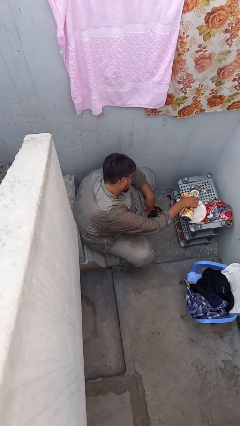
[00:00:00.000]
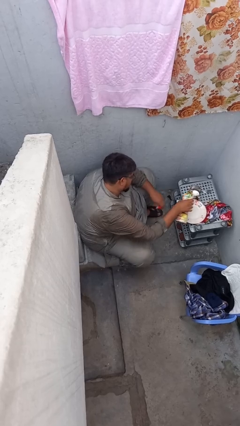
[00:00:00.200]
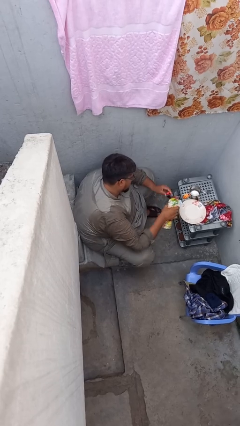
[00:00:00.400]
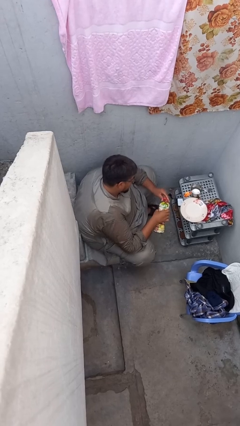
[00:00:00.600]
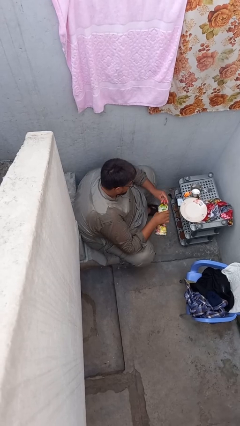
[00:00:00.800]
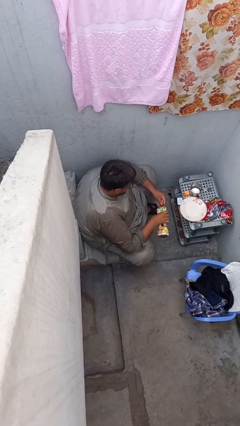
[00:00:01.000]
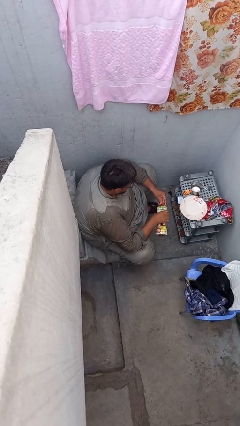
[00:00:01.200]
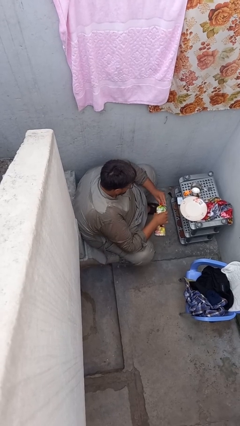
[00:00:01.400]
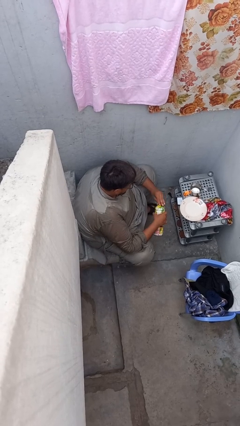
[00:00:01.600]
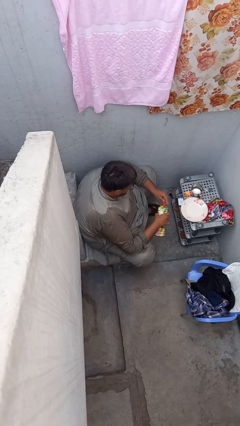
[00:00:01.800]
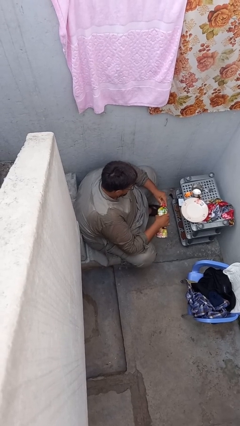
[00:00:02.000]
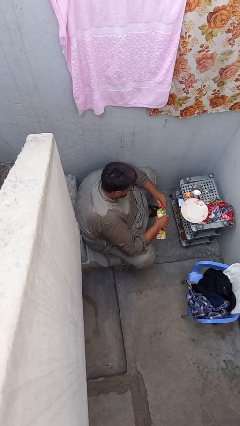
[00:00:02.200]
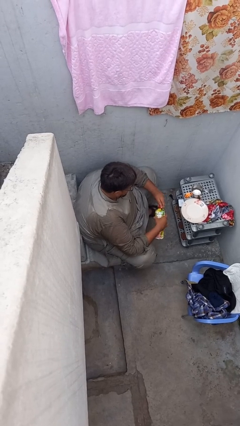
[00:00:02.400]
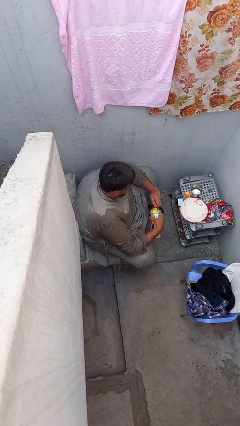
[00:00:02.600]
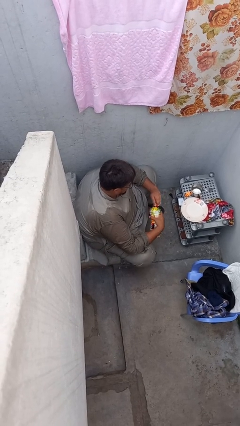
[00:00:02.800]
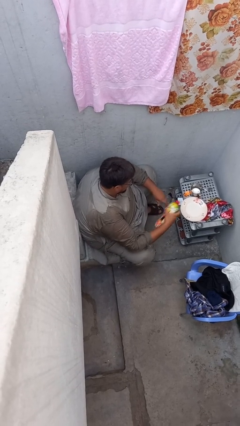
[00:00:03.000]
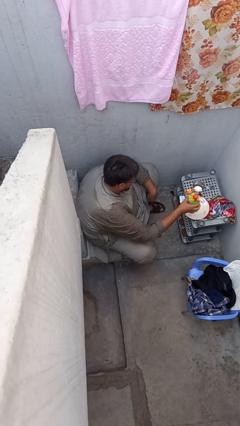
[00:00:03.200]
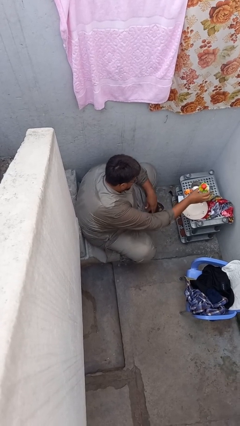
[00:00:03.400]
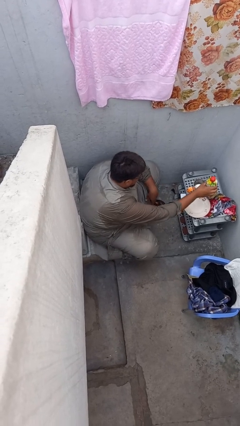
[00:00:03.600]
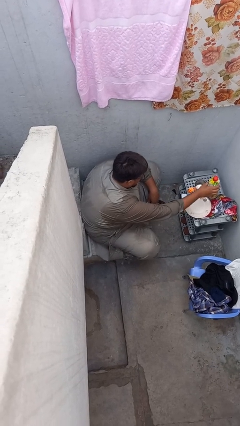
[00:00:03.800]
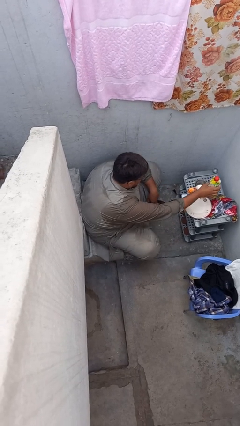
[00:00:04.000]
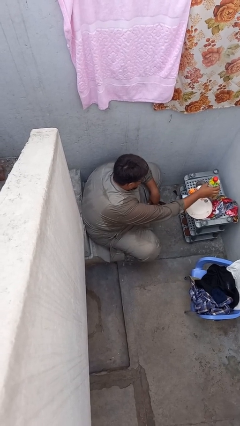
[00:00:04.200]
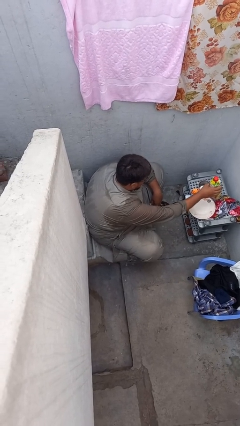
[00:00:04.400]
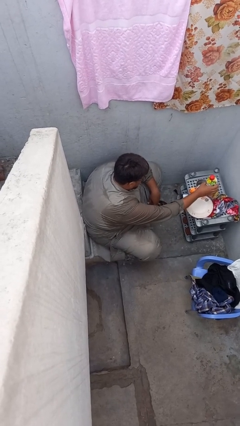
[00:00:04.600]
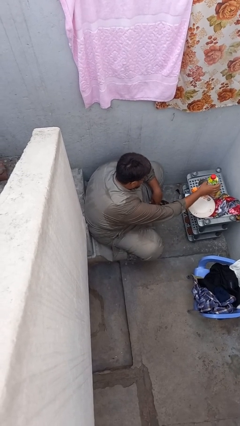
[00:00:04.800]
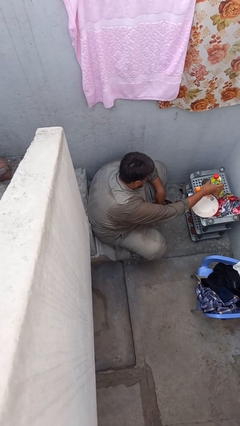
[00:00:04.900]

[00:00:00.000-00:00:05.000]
person screws lid to bottle

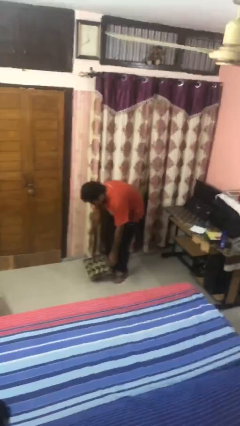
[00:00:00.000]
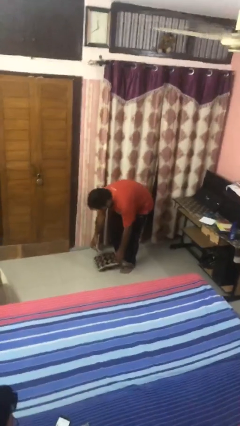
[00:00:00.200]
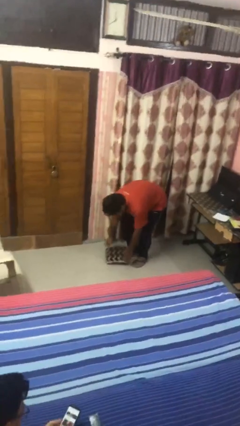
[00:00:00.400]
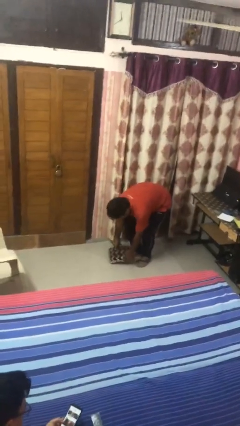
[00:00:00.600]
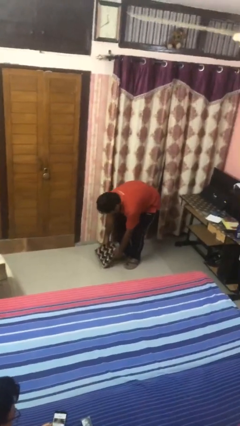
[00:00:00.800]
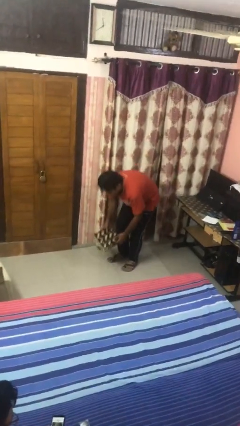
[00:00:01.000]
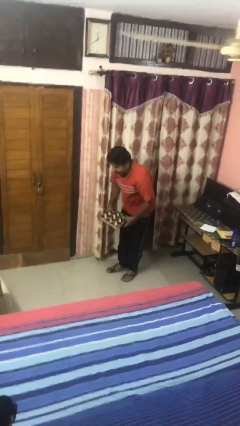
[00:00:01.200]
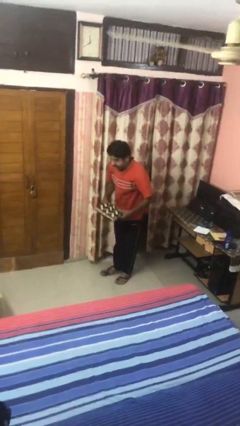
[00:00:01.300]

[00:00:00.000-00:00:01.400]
person picks up object from floor

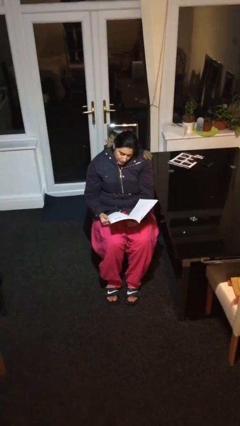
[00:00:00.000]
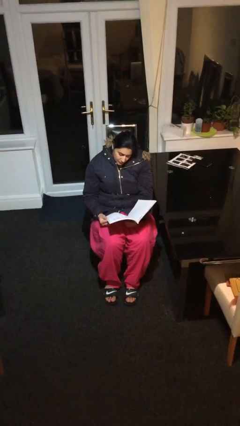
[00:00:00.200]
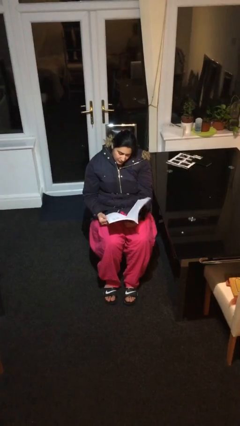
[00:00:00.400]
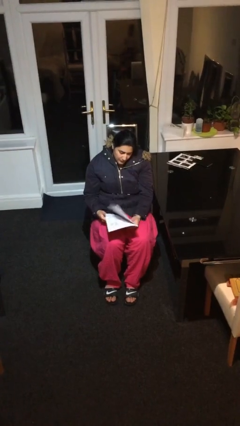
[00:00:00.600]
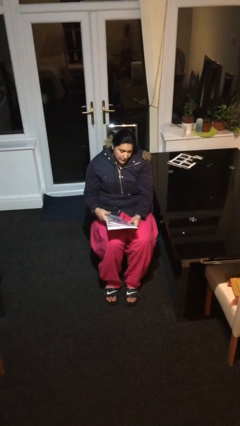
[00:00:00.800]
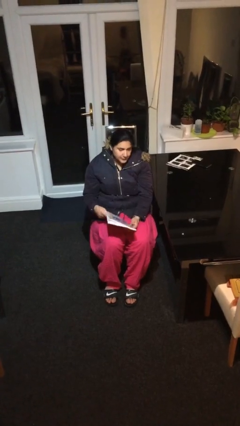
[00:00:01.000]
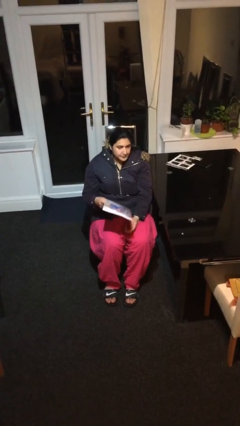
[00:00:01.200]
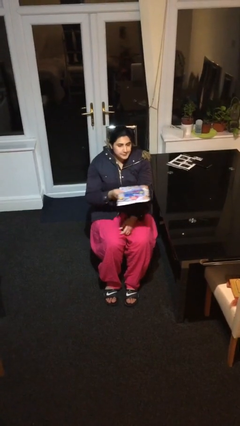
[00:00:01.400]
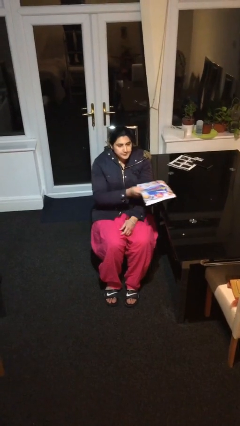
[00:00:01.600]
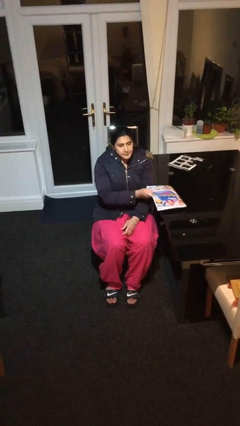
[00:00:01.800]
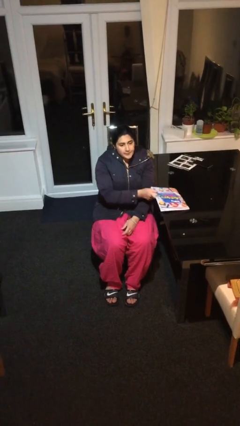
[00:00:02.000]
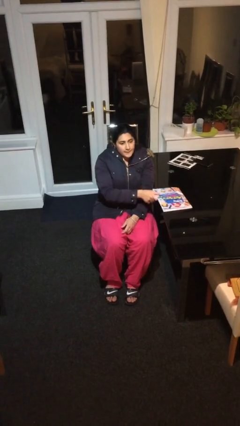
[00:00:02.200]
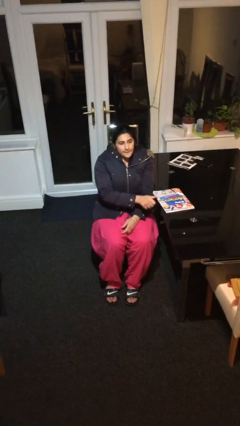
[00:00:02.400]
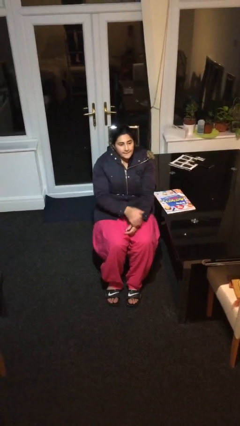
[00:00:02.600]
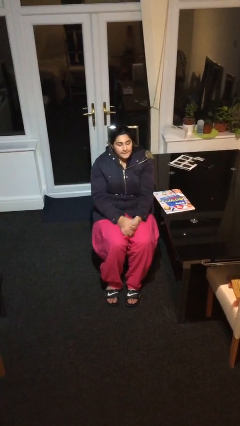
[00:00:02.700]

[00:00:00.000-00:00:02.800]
person puts down object on table

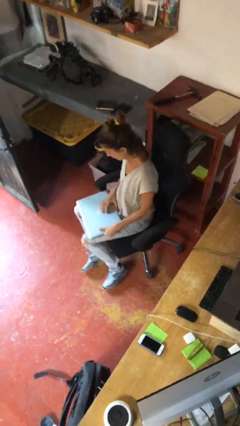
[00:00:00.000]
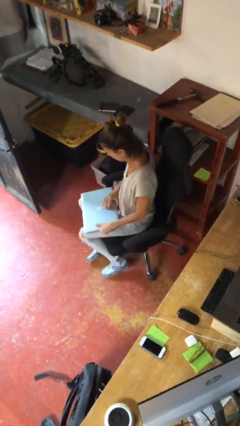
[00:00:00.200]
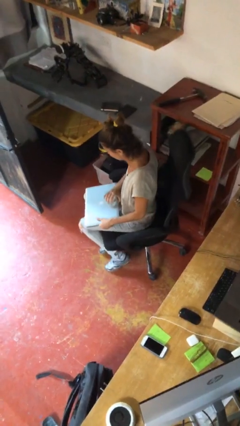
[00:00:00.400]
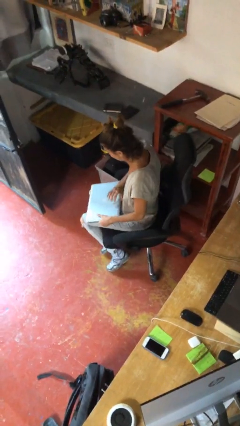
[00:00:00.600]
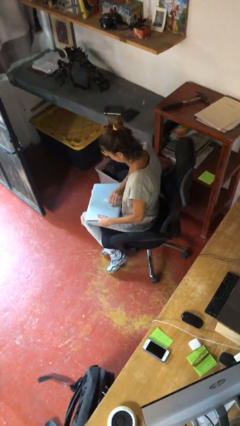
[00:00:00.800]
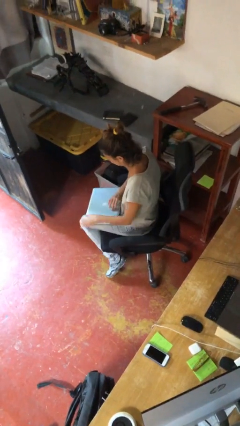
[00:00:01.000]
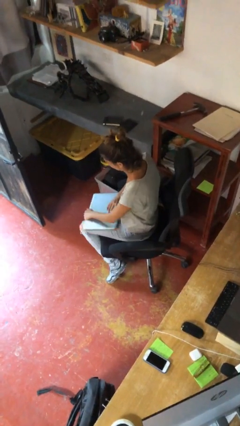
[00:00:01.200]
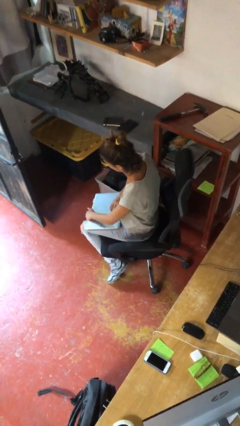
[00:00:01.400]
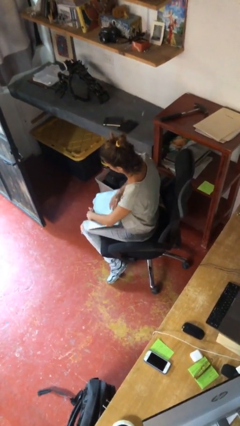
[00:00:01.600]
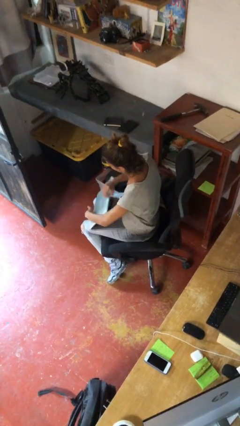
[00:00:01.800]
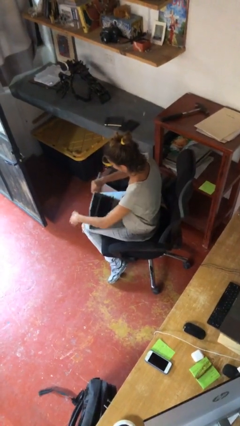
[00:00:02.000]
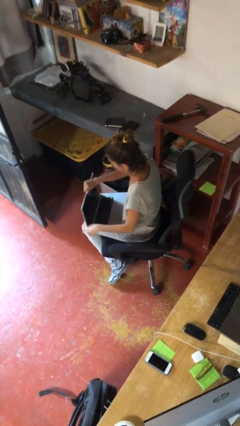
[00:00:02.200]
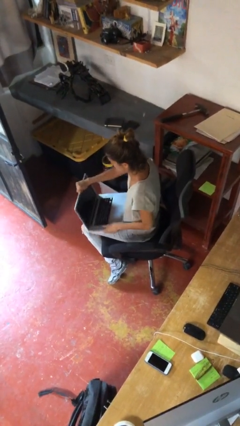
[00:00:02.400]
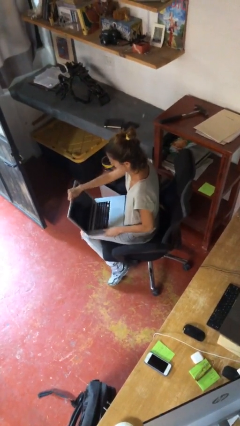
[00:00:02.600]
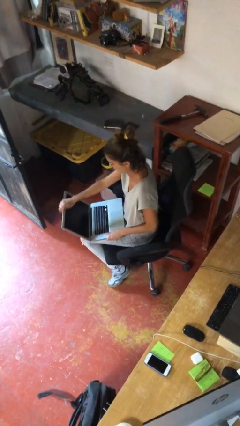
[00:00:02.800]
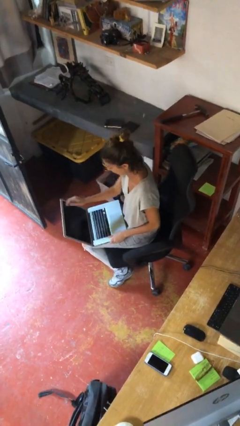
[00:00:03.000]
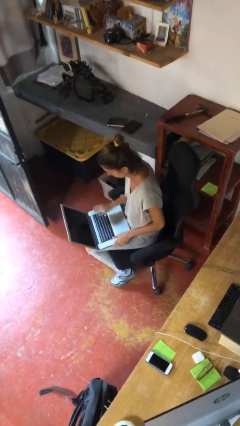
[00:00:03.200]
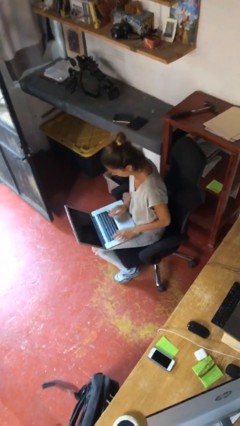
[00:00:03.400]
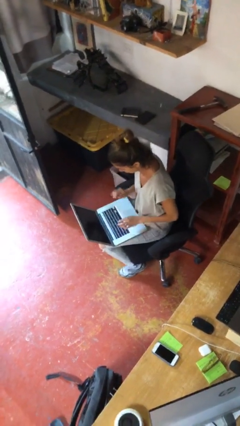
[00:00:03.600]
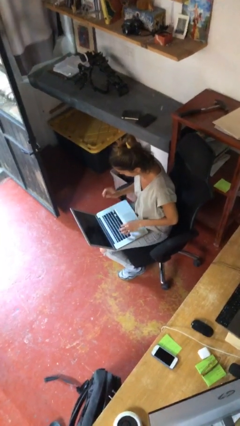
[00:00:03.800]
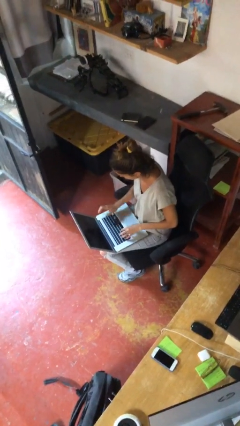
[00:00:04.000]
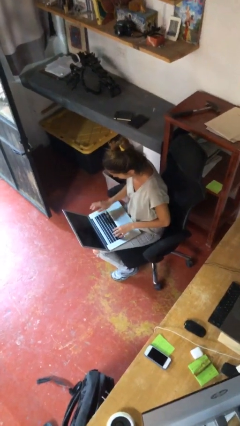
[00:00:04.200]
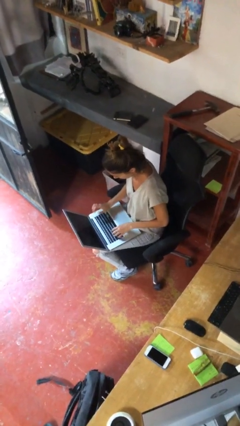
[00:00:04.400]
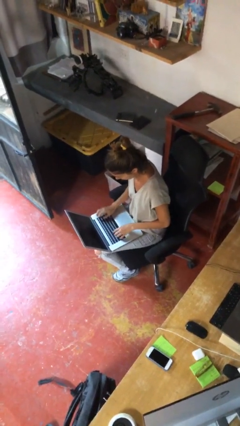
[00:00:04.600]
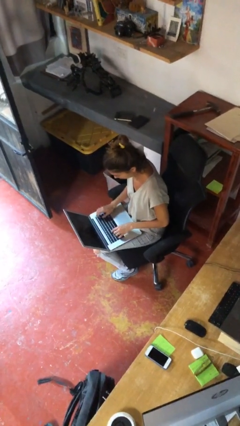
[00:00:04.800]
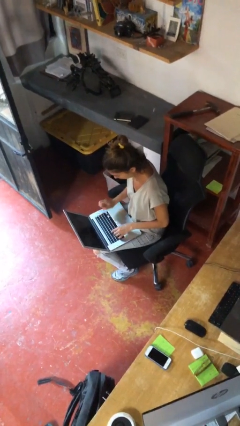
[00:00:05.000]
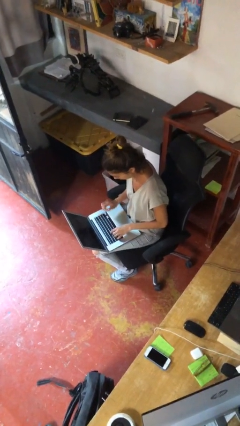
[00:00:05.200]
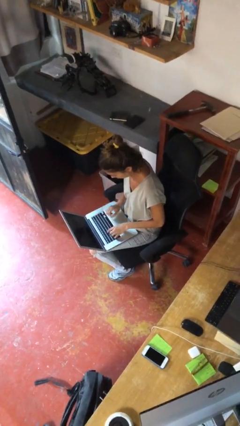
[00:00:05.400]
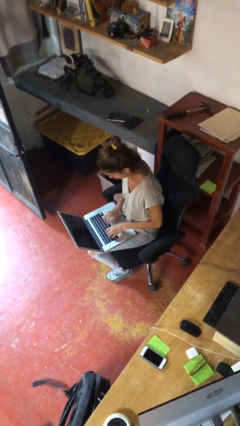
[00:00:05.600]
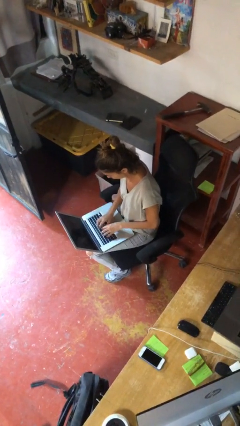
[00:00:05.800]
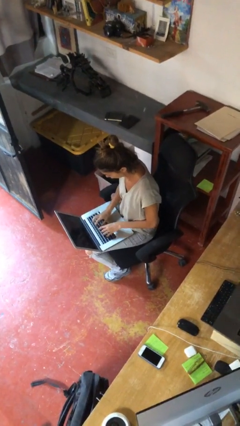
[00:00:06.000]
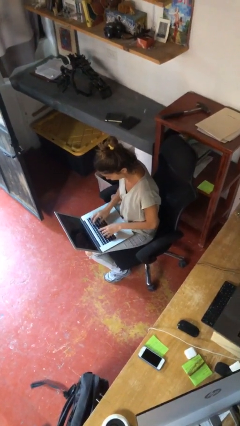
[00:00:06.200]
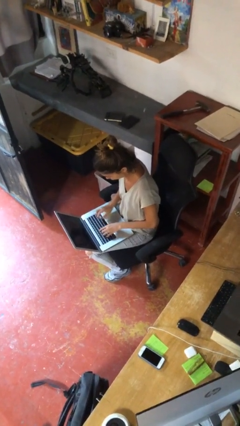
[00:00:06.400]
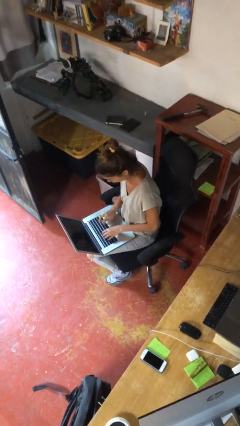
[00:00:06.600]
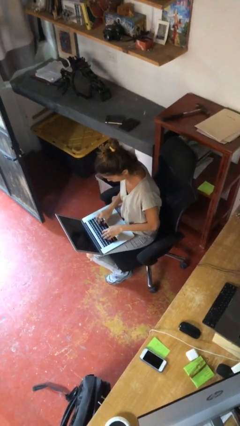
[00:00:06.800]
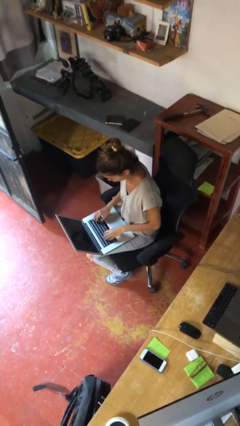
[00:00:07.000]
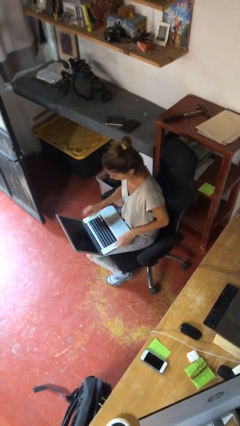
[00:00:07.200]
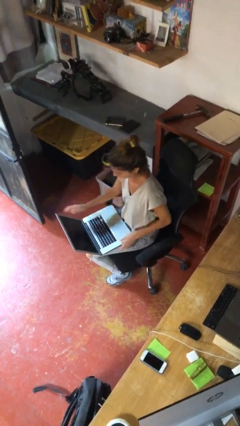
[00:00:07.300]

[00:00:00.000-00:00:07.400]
person interacts with laptop

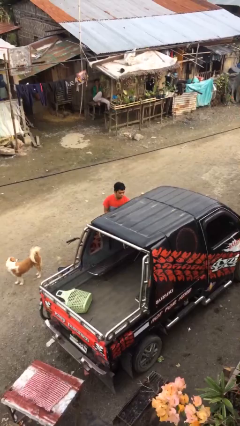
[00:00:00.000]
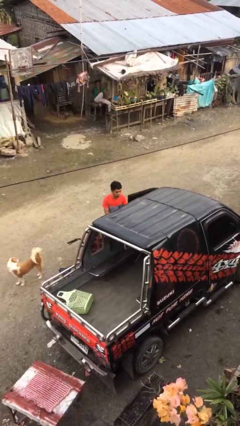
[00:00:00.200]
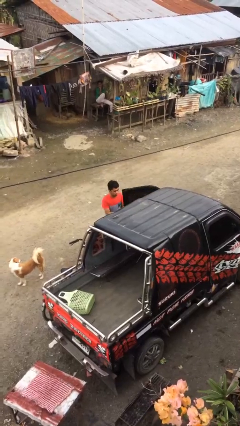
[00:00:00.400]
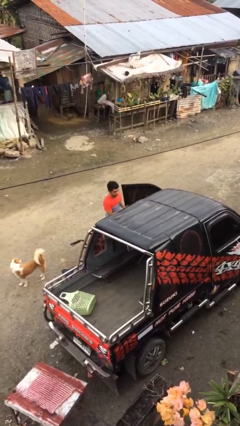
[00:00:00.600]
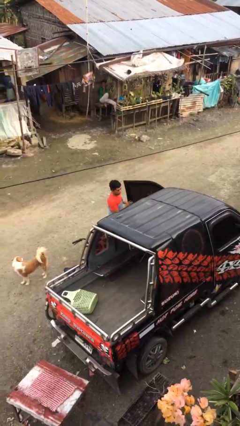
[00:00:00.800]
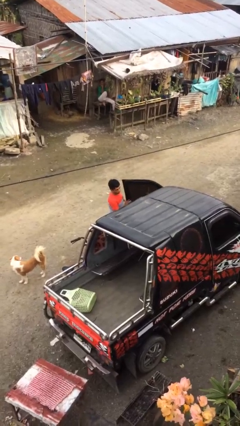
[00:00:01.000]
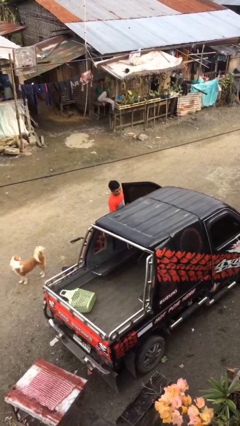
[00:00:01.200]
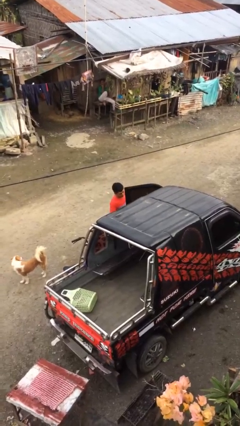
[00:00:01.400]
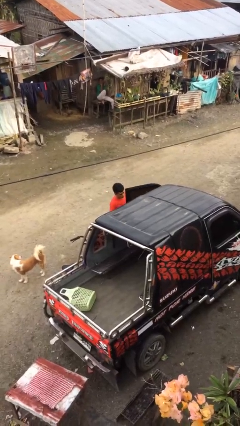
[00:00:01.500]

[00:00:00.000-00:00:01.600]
person opens car door
